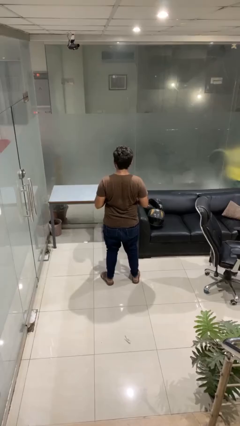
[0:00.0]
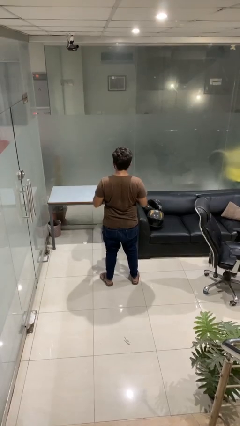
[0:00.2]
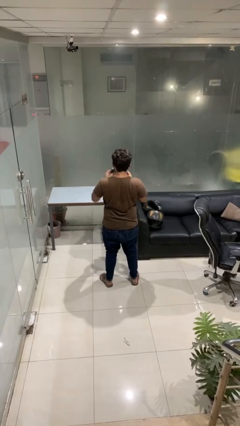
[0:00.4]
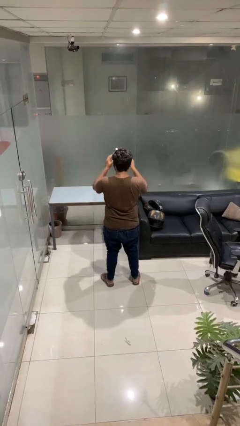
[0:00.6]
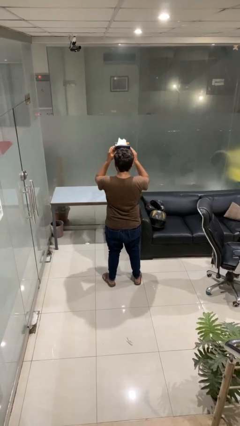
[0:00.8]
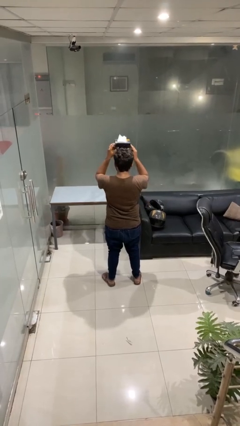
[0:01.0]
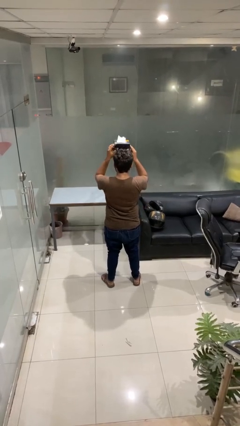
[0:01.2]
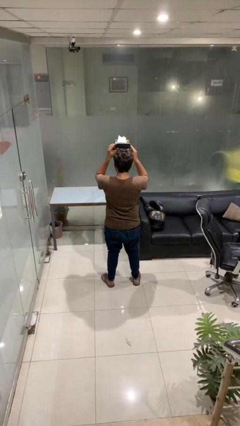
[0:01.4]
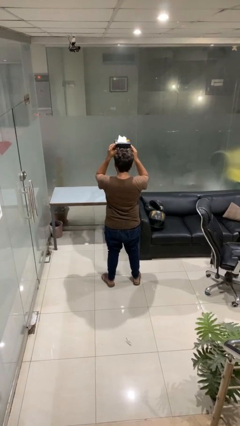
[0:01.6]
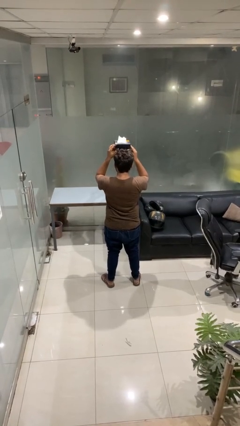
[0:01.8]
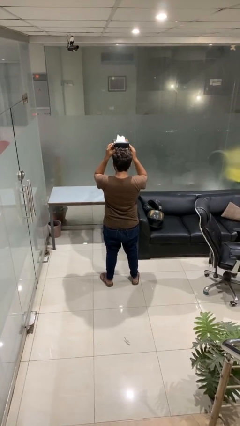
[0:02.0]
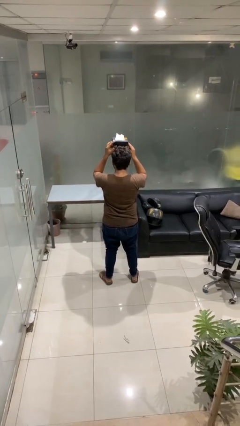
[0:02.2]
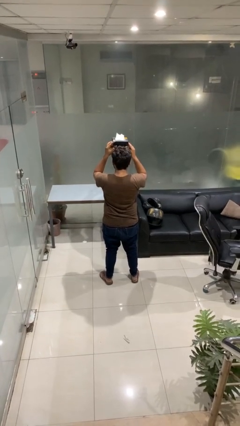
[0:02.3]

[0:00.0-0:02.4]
person holds object above head

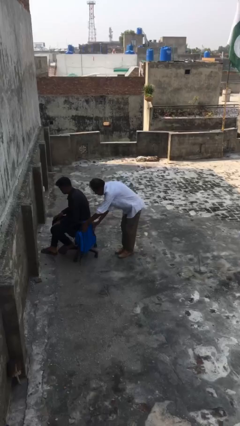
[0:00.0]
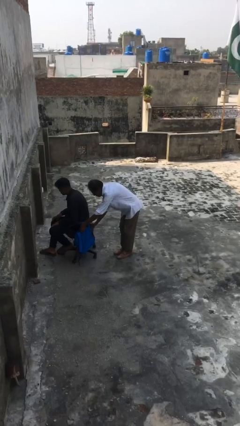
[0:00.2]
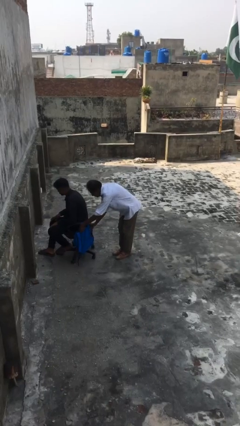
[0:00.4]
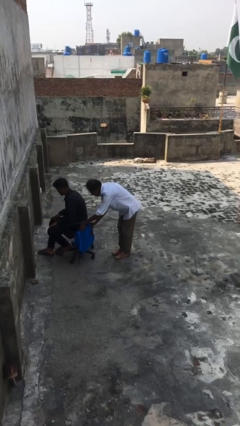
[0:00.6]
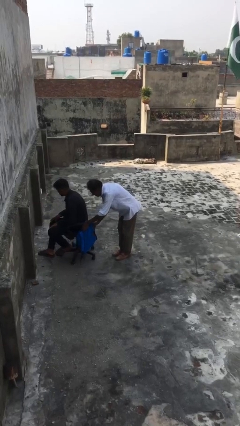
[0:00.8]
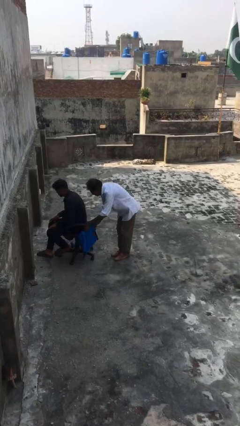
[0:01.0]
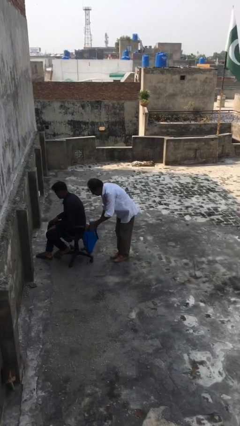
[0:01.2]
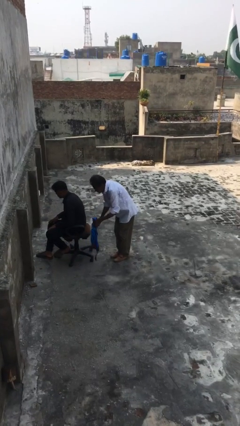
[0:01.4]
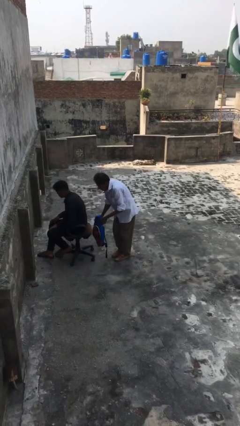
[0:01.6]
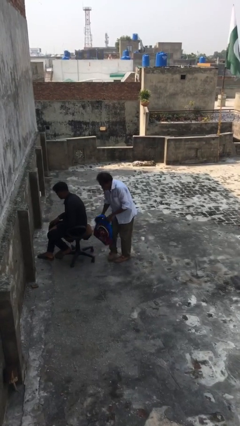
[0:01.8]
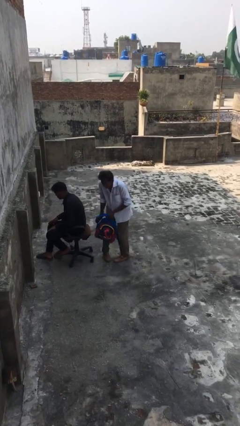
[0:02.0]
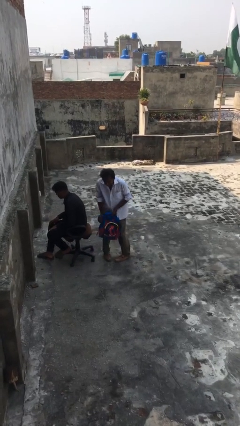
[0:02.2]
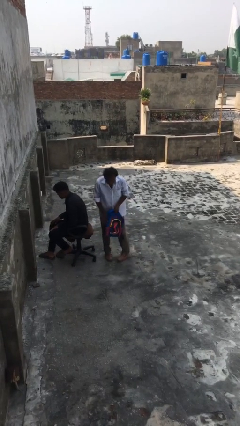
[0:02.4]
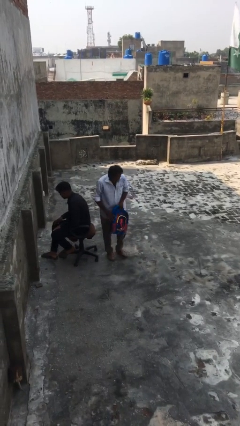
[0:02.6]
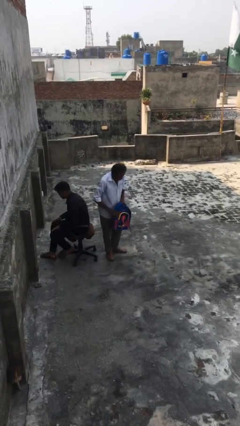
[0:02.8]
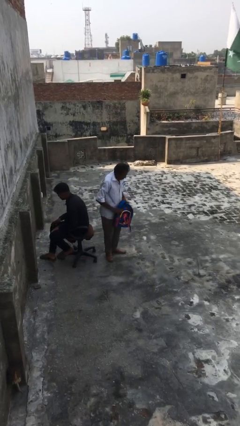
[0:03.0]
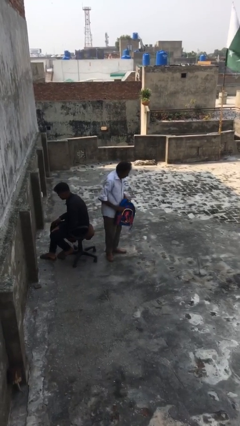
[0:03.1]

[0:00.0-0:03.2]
person steals object from person

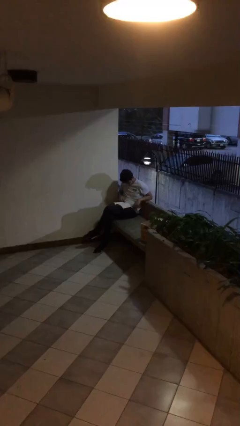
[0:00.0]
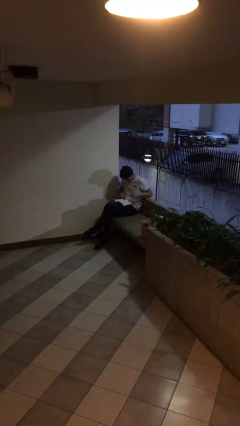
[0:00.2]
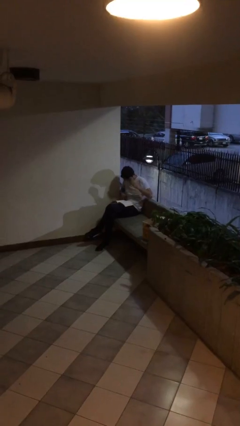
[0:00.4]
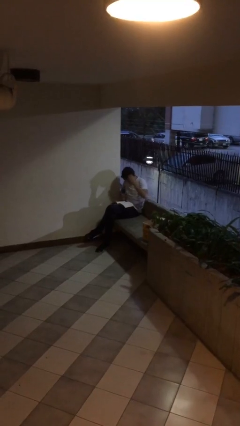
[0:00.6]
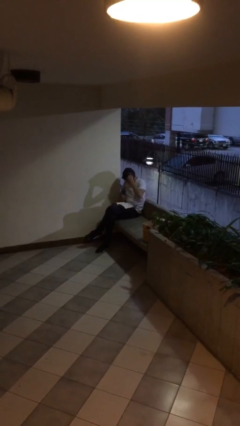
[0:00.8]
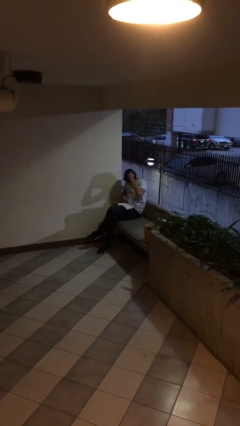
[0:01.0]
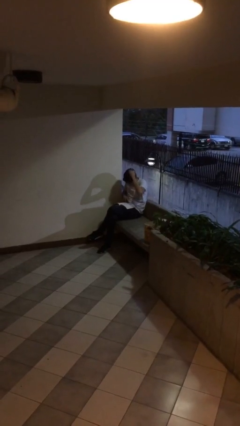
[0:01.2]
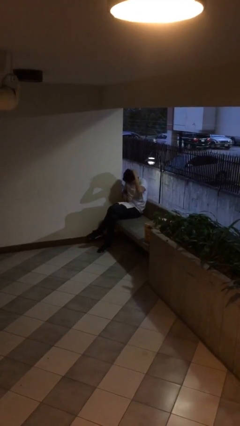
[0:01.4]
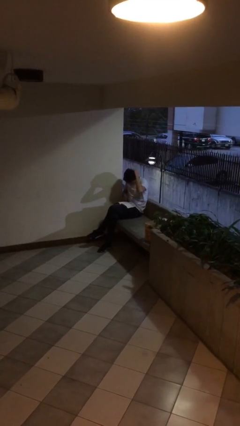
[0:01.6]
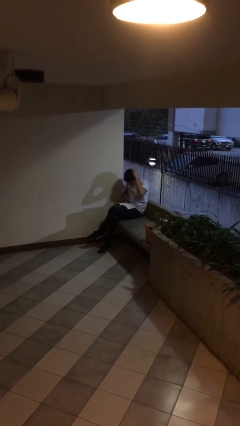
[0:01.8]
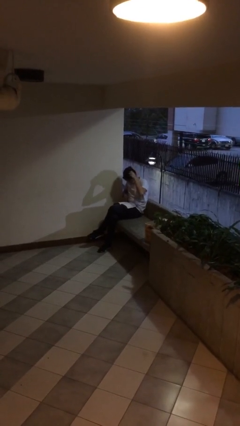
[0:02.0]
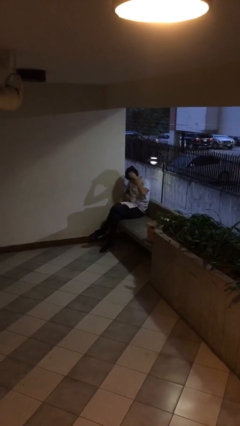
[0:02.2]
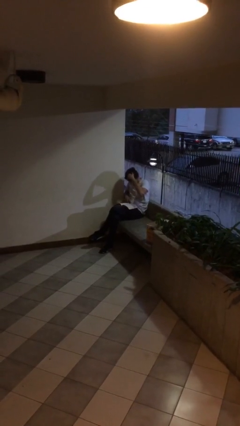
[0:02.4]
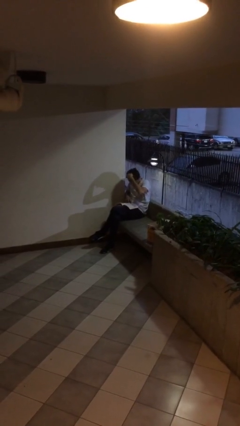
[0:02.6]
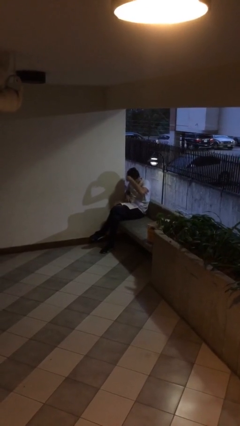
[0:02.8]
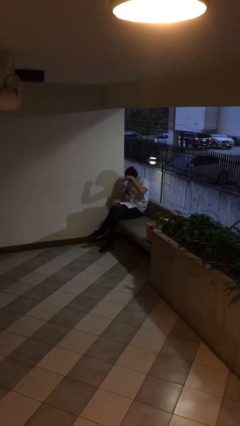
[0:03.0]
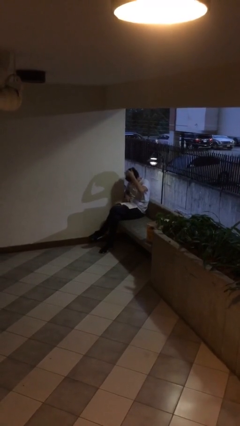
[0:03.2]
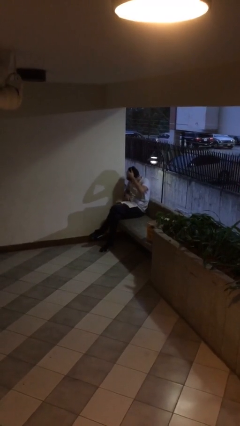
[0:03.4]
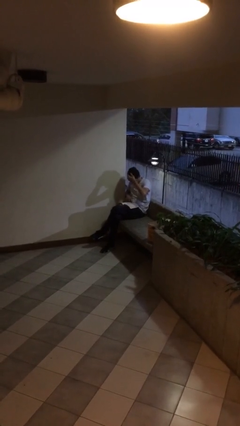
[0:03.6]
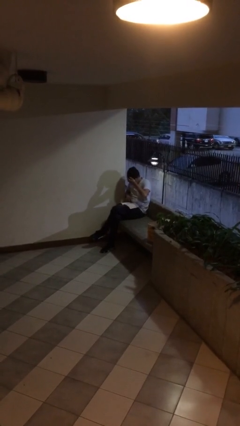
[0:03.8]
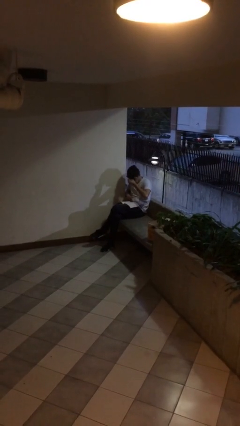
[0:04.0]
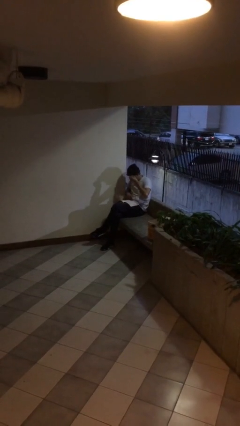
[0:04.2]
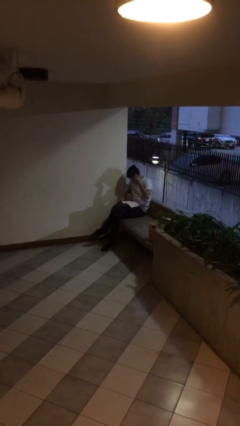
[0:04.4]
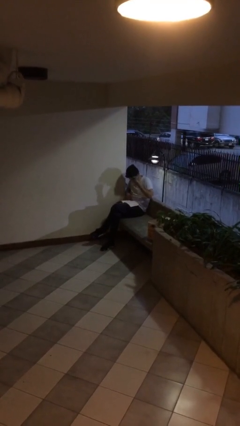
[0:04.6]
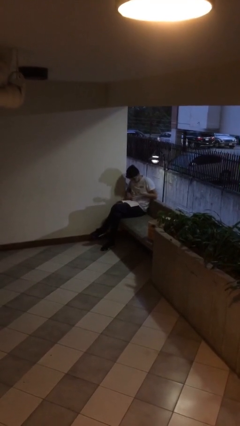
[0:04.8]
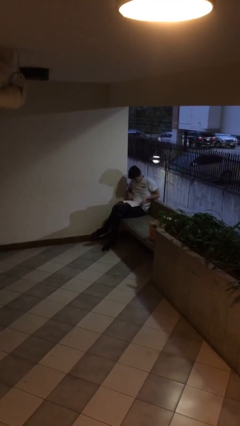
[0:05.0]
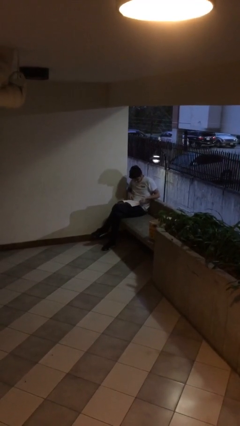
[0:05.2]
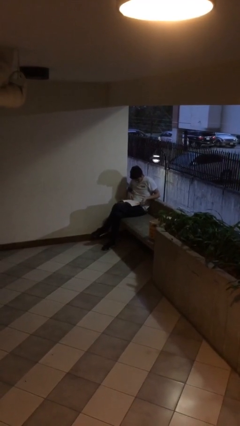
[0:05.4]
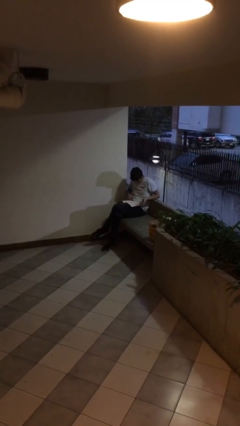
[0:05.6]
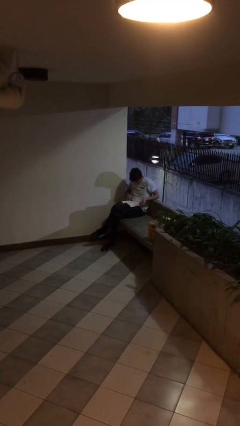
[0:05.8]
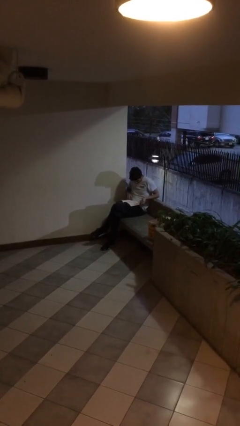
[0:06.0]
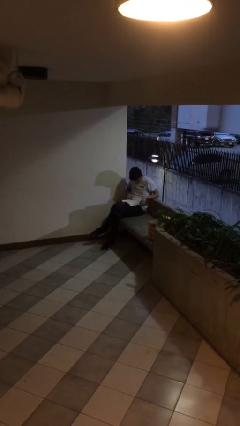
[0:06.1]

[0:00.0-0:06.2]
person reads document

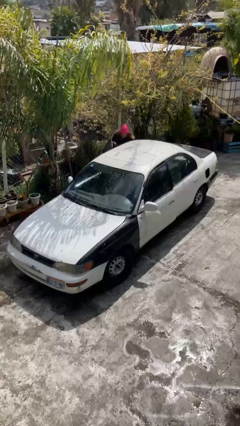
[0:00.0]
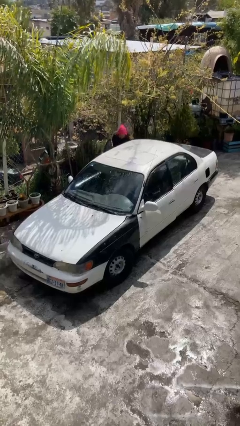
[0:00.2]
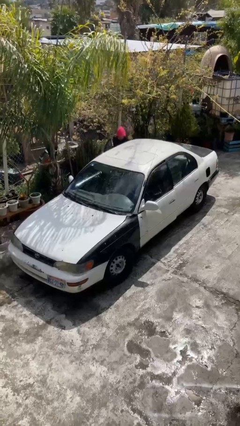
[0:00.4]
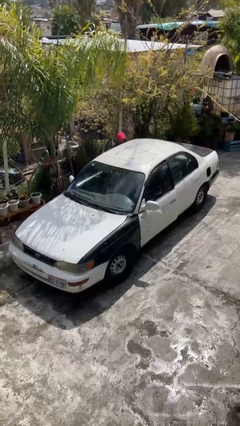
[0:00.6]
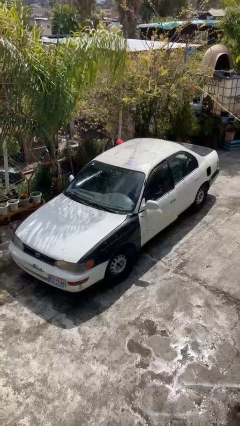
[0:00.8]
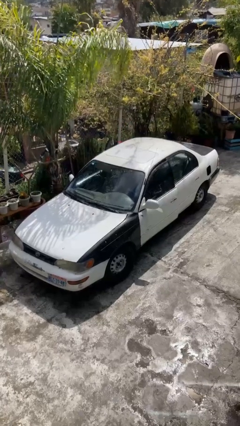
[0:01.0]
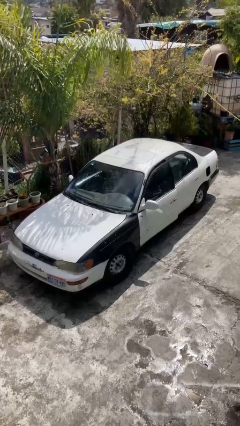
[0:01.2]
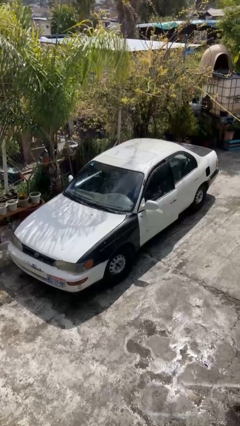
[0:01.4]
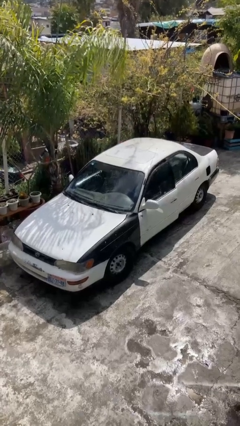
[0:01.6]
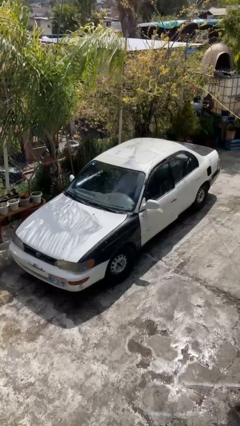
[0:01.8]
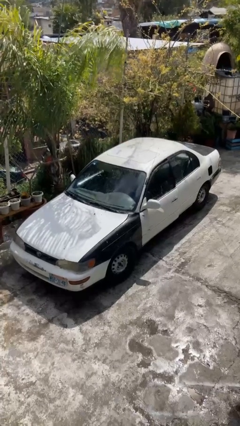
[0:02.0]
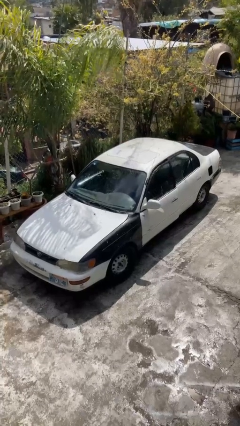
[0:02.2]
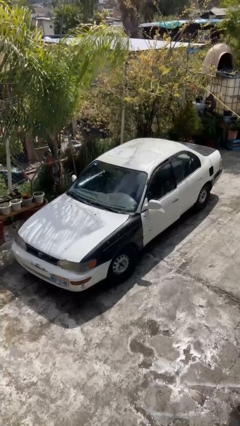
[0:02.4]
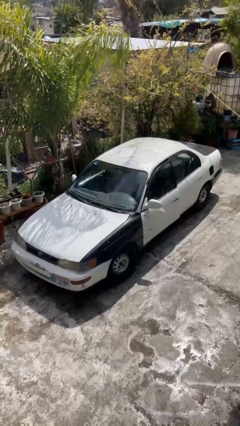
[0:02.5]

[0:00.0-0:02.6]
car picks up person

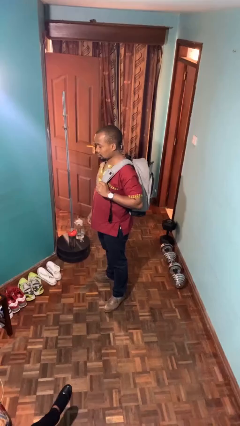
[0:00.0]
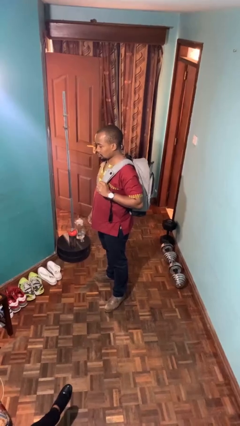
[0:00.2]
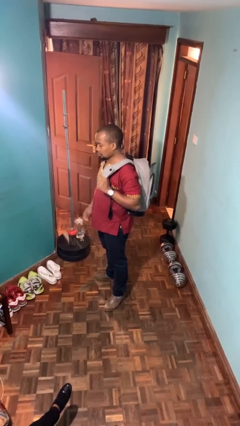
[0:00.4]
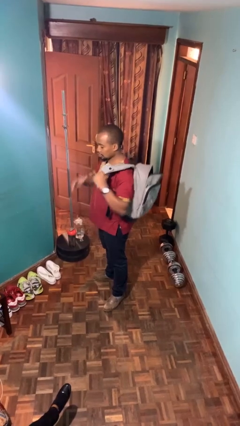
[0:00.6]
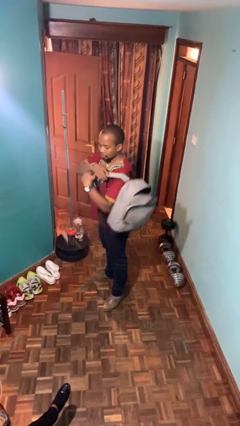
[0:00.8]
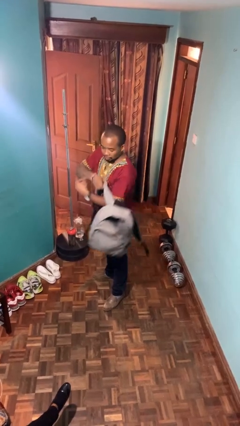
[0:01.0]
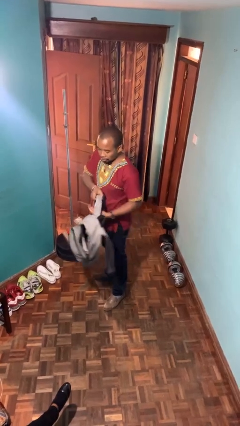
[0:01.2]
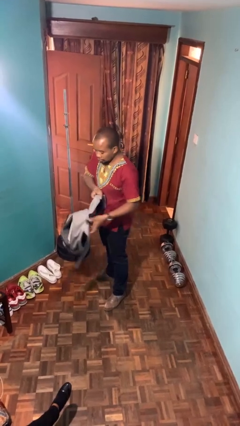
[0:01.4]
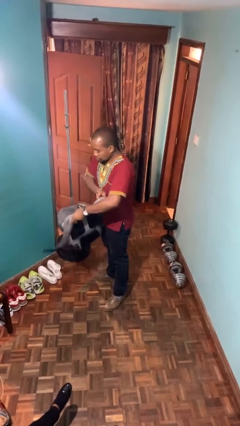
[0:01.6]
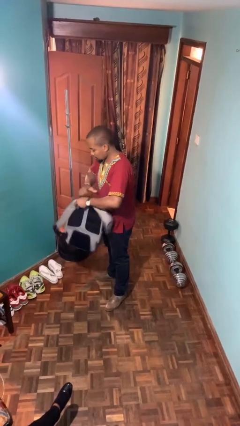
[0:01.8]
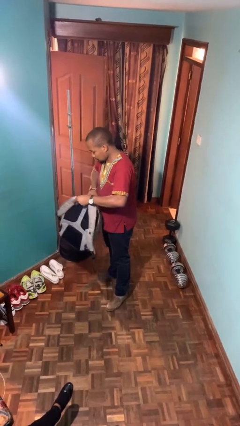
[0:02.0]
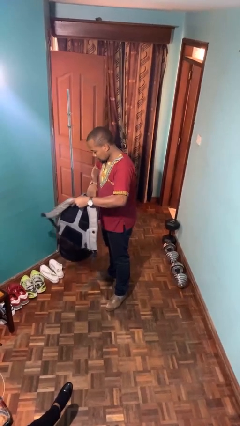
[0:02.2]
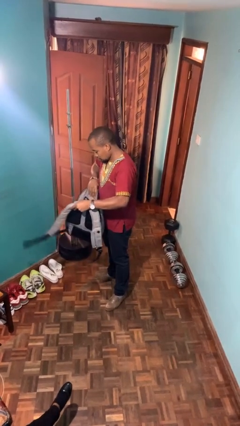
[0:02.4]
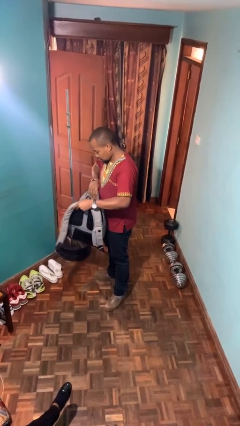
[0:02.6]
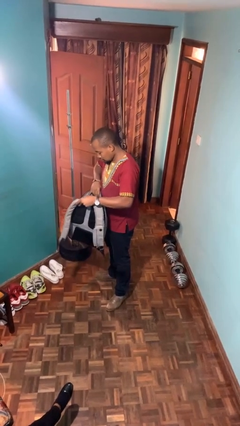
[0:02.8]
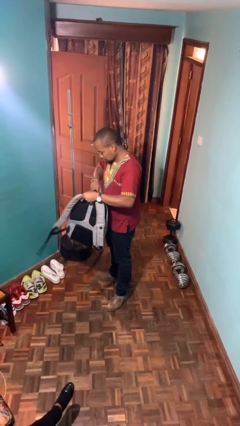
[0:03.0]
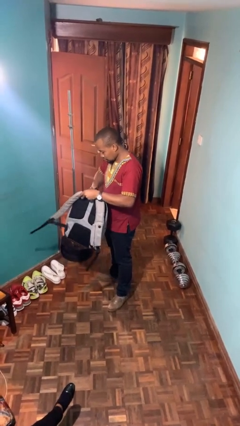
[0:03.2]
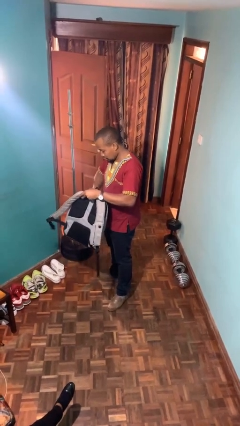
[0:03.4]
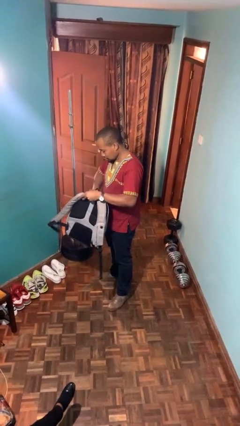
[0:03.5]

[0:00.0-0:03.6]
person searches in backpack
